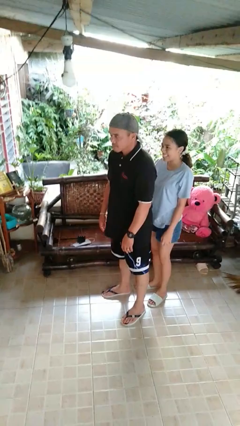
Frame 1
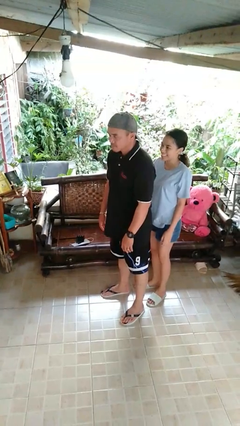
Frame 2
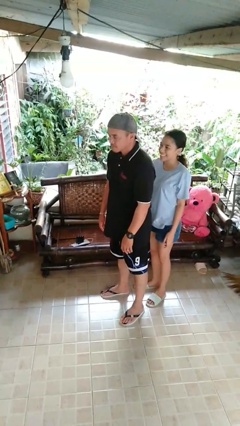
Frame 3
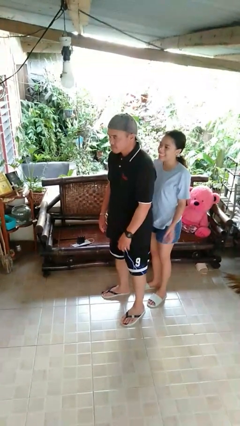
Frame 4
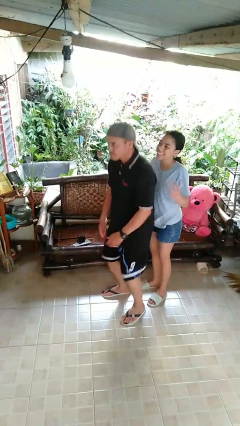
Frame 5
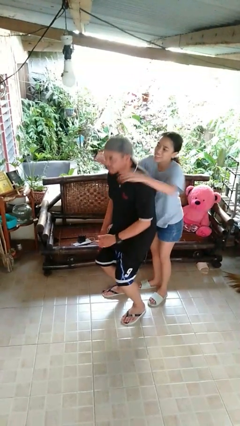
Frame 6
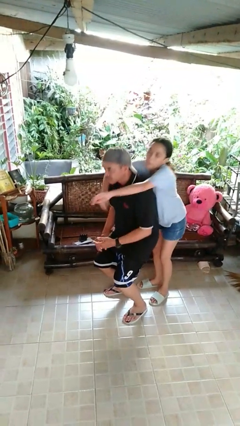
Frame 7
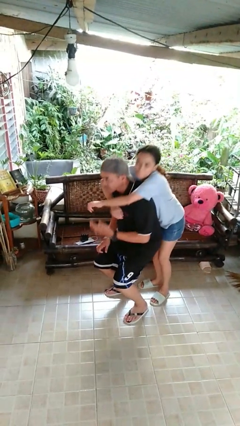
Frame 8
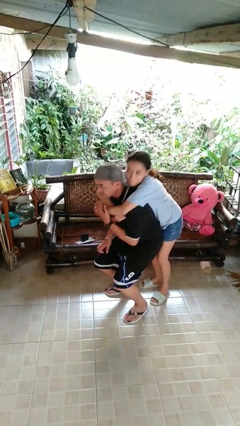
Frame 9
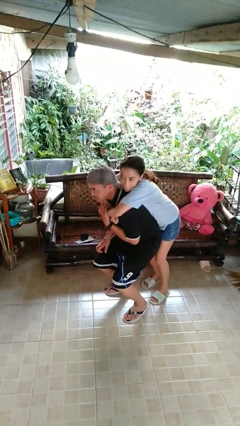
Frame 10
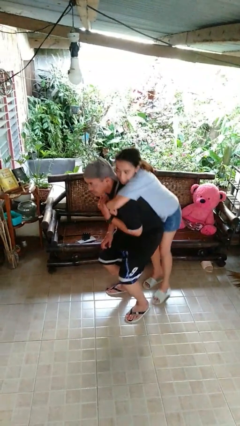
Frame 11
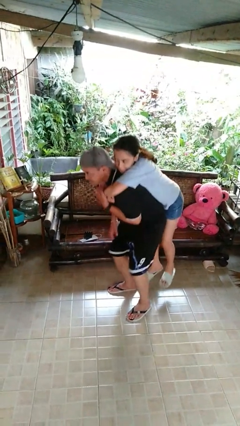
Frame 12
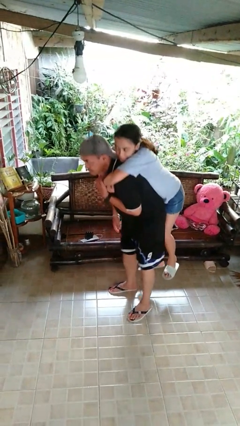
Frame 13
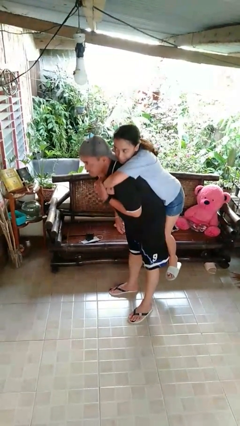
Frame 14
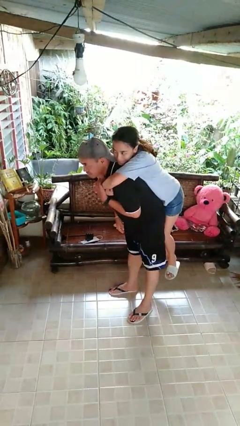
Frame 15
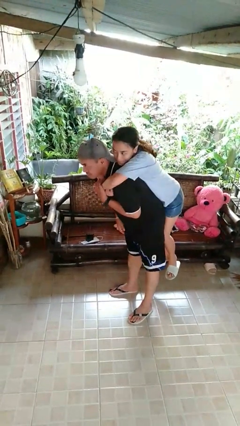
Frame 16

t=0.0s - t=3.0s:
person picks up person

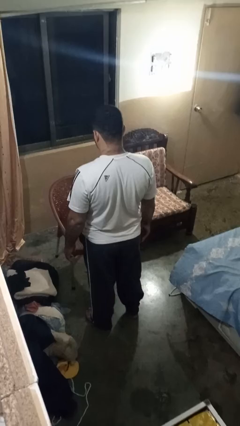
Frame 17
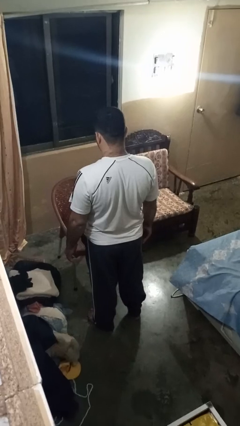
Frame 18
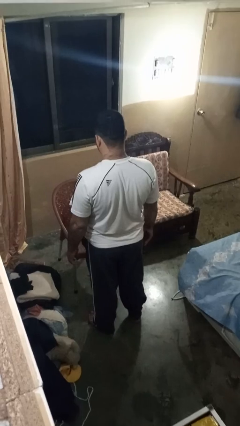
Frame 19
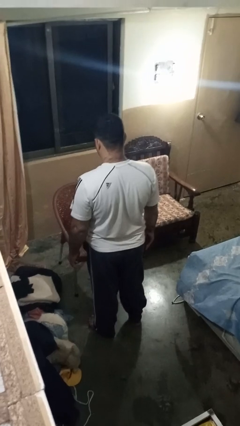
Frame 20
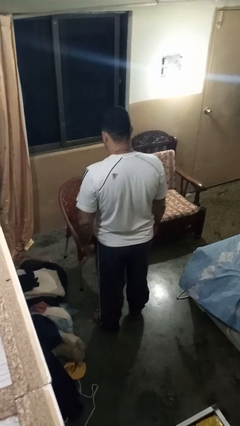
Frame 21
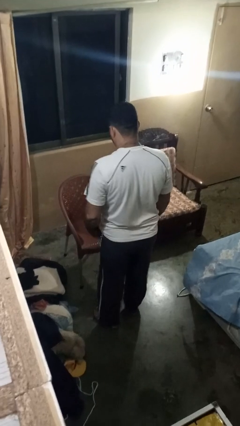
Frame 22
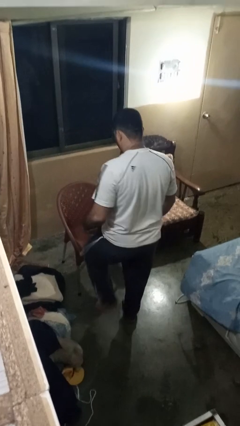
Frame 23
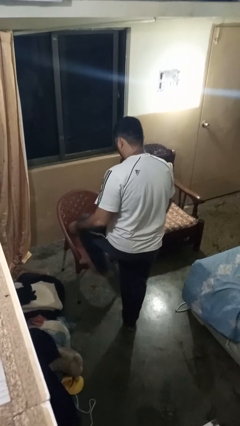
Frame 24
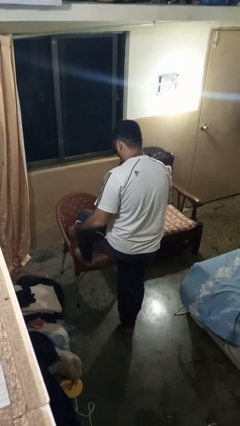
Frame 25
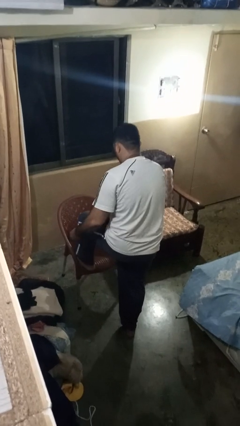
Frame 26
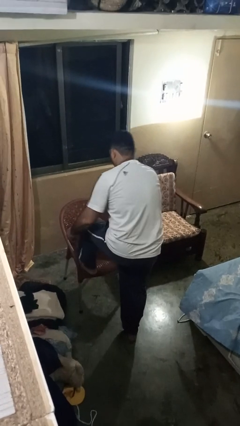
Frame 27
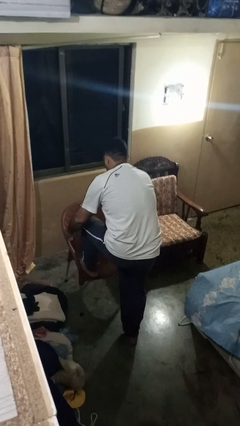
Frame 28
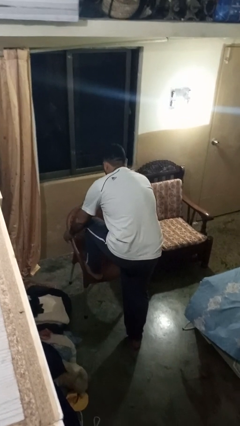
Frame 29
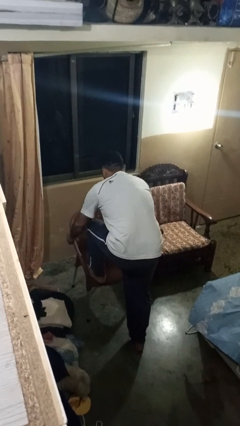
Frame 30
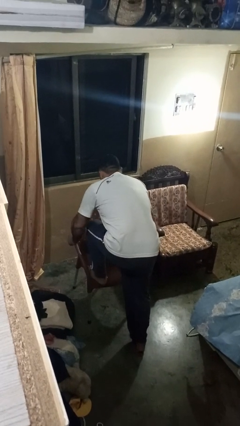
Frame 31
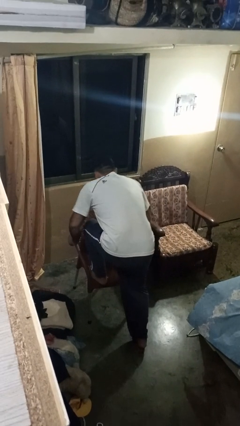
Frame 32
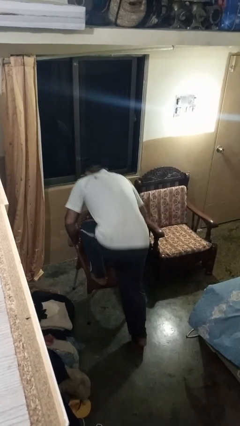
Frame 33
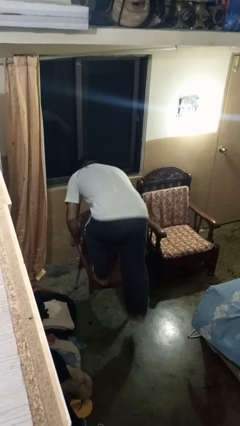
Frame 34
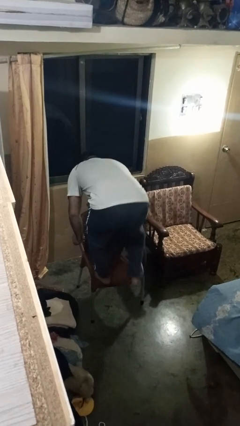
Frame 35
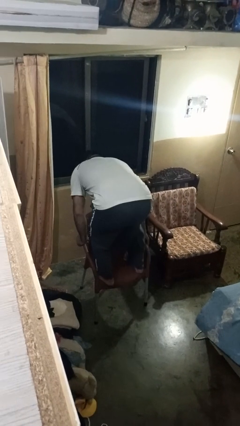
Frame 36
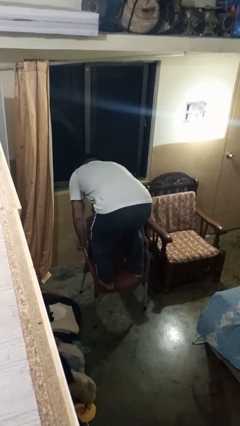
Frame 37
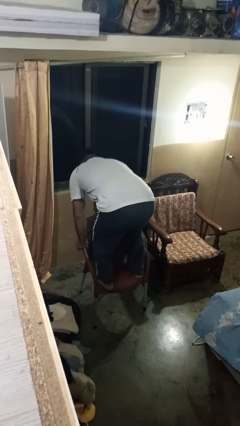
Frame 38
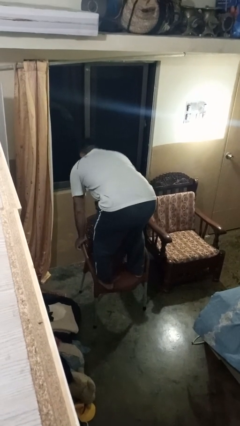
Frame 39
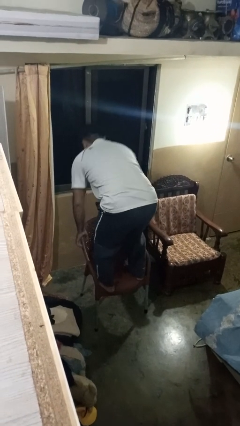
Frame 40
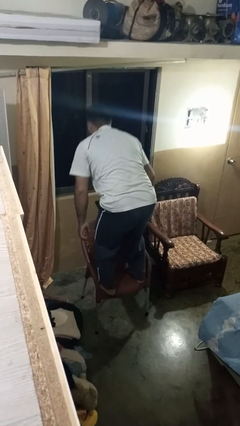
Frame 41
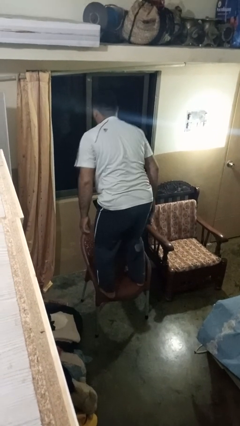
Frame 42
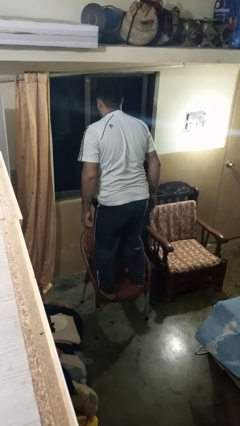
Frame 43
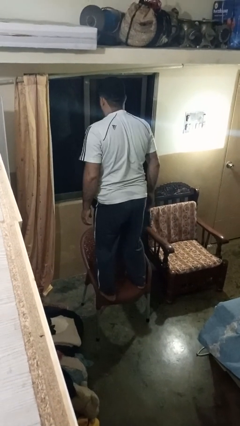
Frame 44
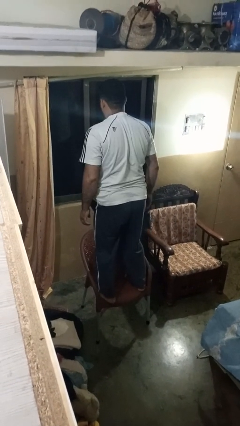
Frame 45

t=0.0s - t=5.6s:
person climbs on chair

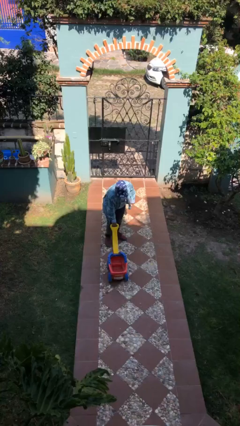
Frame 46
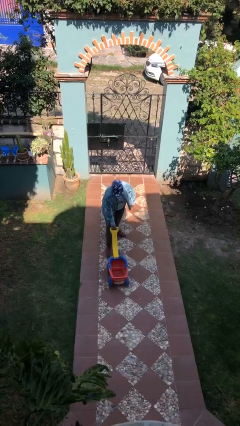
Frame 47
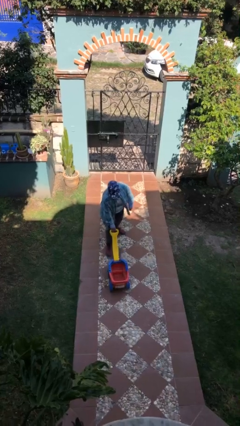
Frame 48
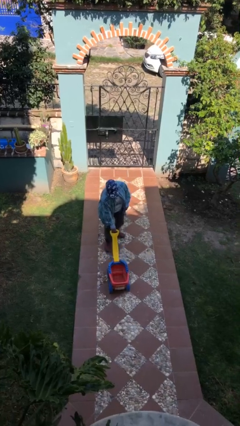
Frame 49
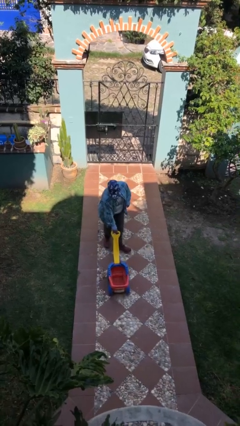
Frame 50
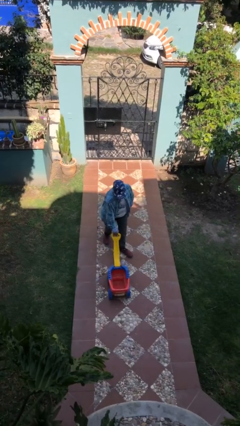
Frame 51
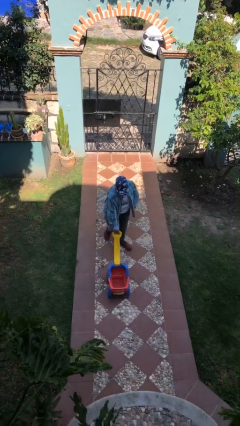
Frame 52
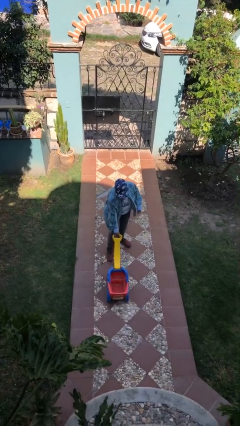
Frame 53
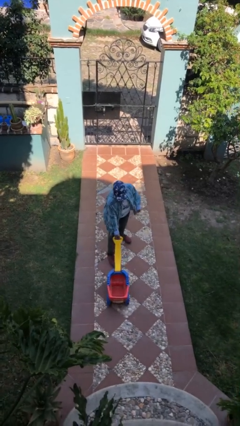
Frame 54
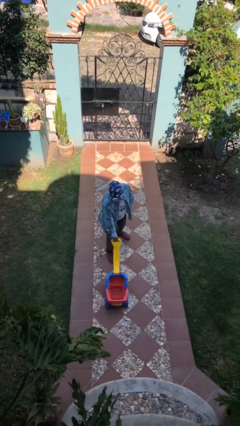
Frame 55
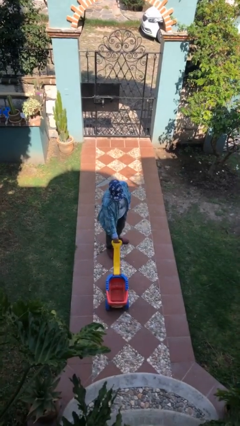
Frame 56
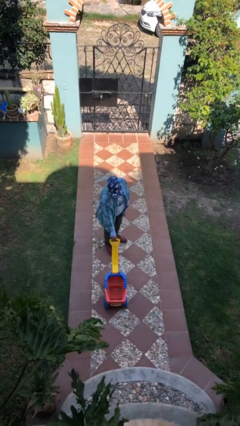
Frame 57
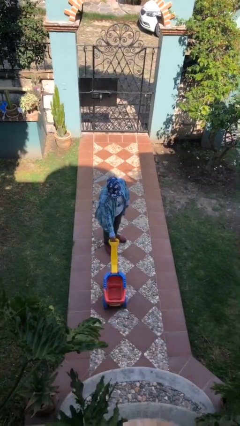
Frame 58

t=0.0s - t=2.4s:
person pushes wheeled cart

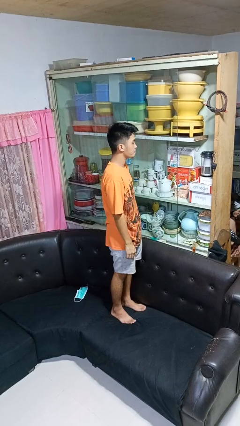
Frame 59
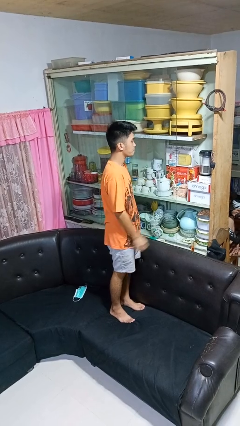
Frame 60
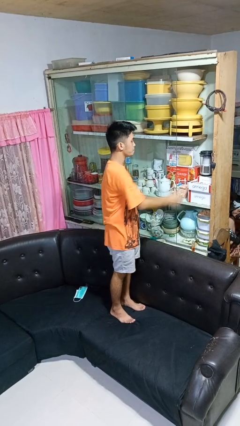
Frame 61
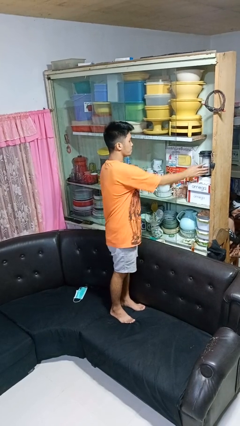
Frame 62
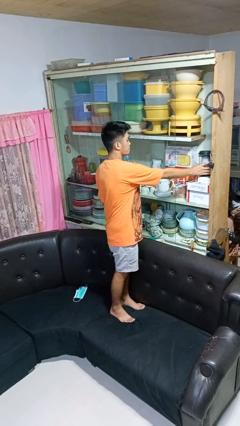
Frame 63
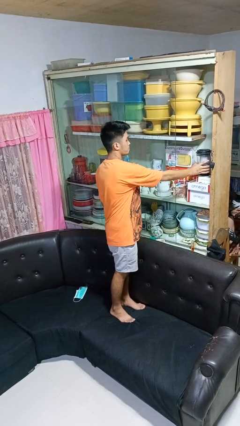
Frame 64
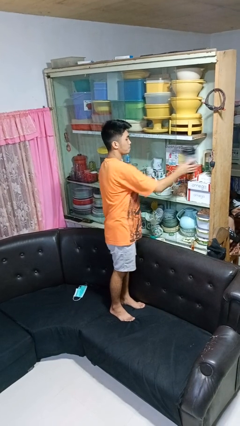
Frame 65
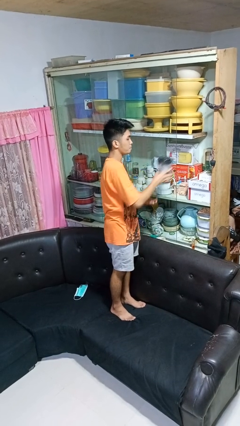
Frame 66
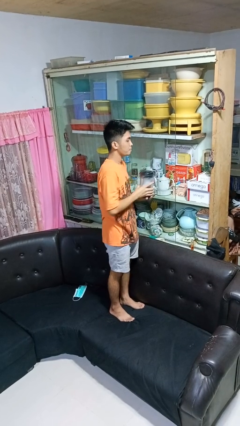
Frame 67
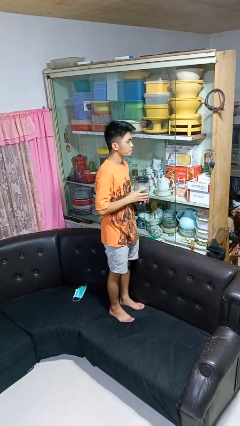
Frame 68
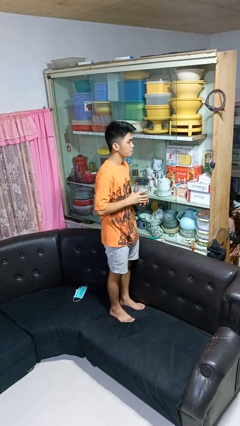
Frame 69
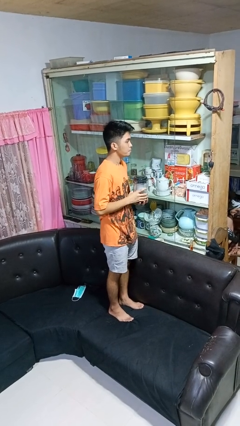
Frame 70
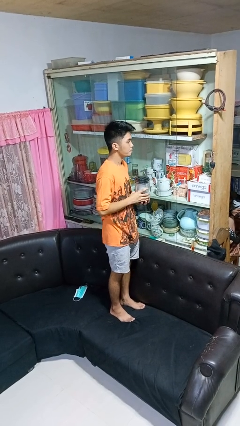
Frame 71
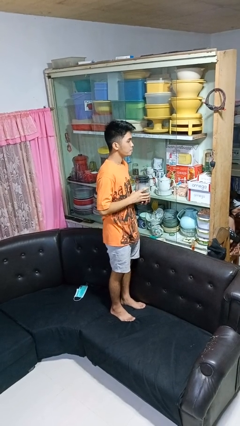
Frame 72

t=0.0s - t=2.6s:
person picks up object from cabinet

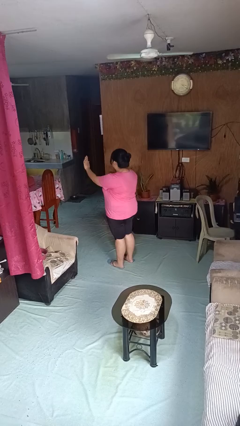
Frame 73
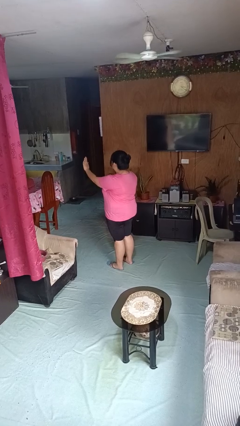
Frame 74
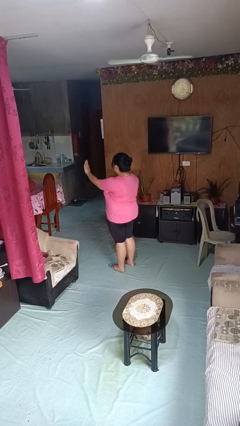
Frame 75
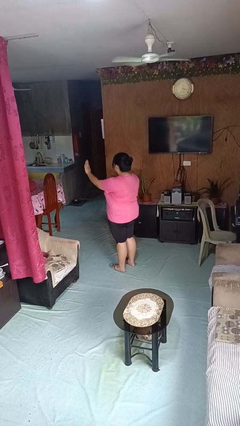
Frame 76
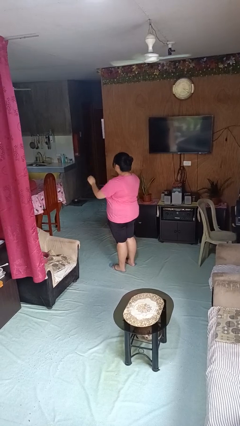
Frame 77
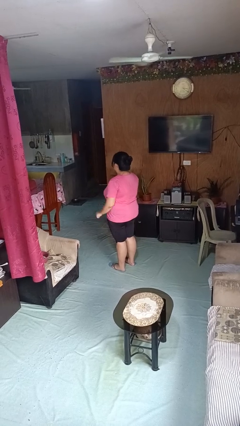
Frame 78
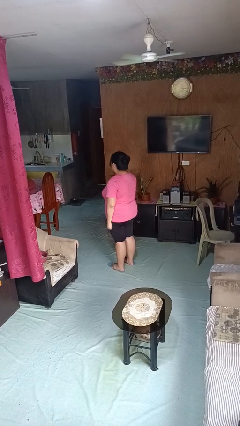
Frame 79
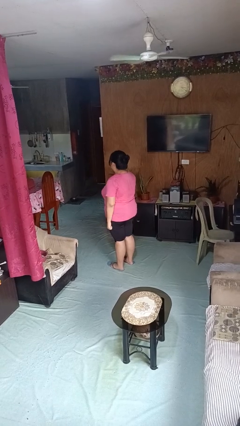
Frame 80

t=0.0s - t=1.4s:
person gestures stop

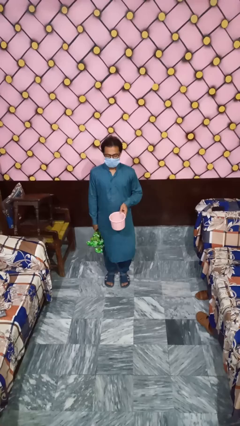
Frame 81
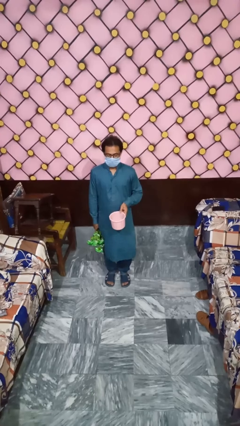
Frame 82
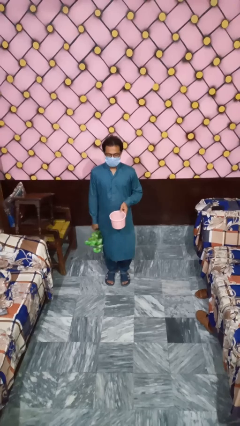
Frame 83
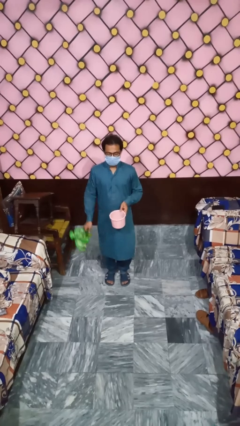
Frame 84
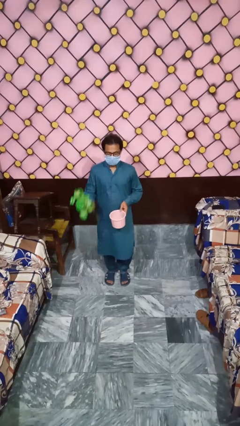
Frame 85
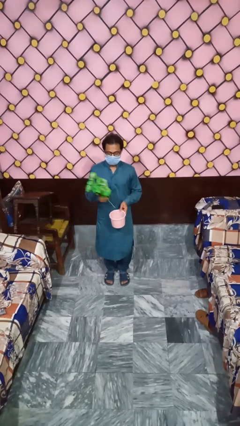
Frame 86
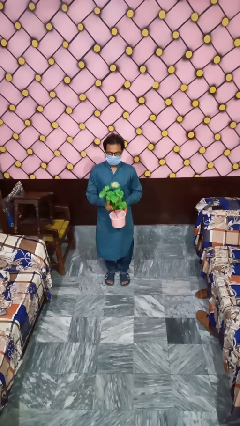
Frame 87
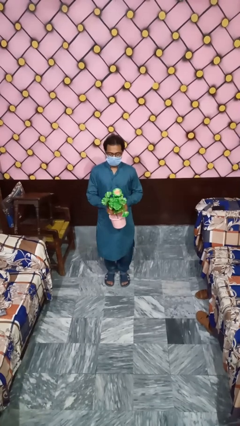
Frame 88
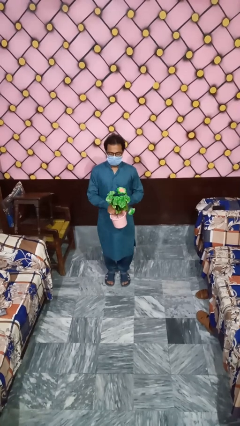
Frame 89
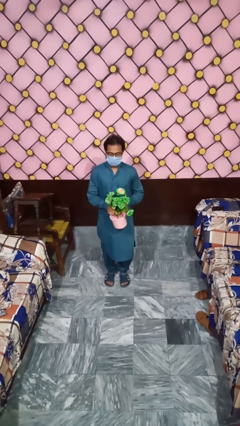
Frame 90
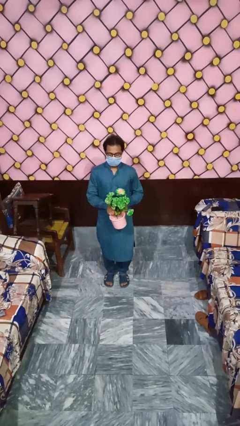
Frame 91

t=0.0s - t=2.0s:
person arranges flowers in vase

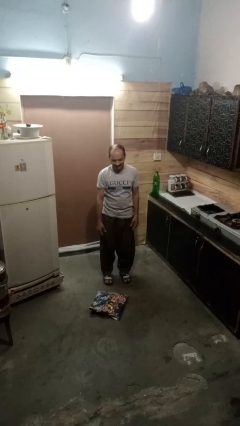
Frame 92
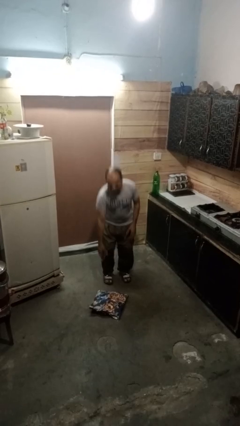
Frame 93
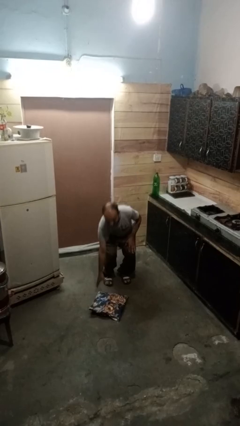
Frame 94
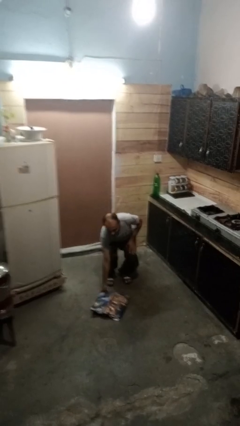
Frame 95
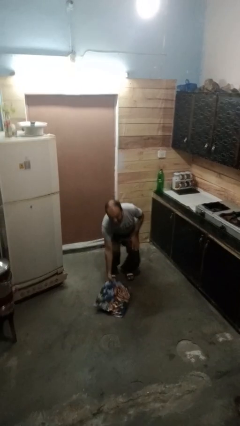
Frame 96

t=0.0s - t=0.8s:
person picks up object from floor
